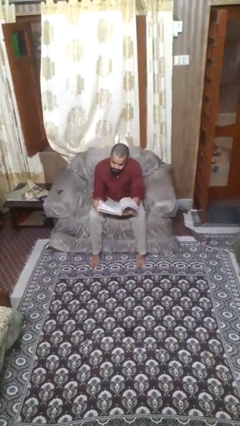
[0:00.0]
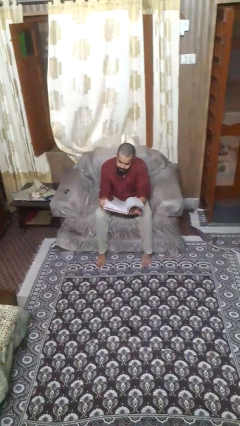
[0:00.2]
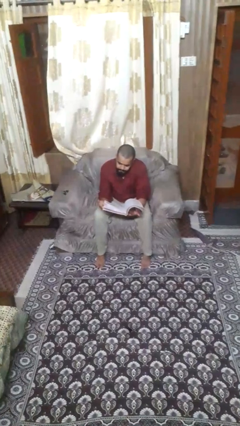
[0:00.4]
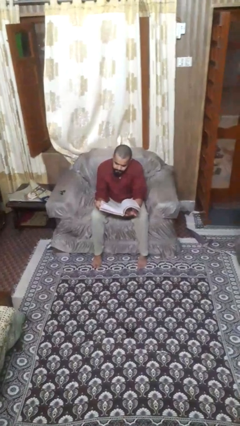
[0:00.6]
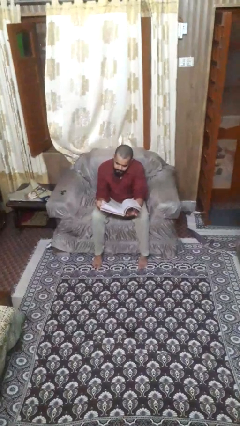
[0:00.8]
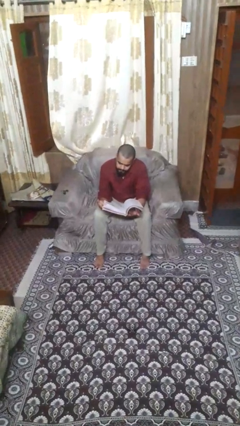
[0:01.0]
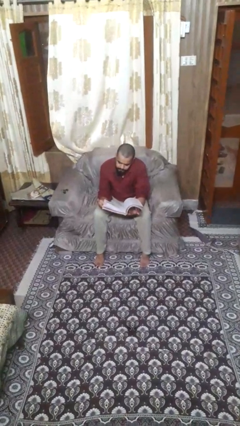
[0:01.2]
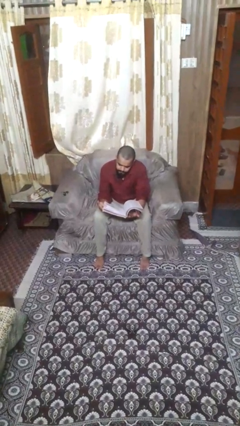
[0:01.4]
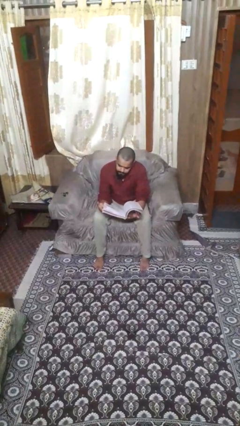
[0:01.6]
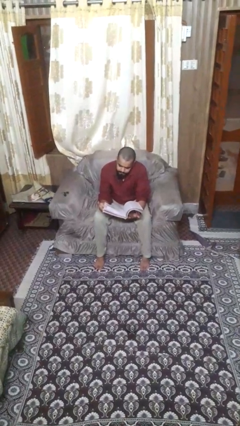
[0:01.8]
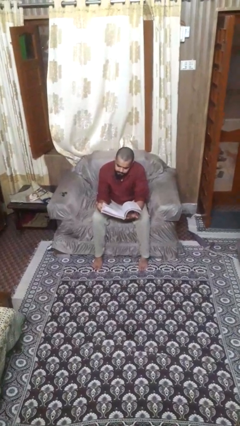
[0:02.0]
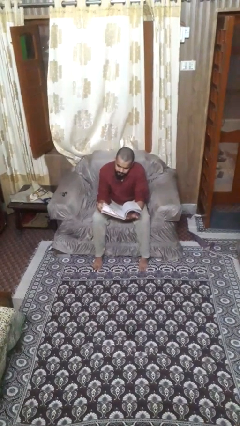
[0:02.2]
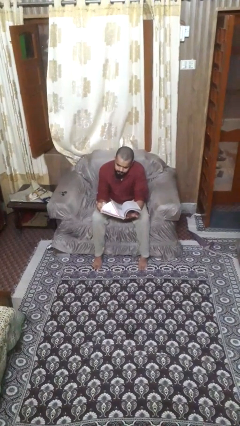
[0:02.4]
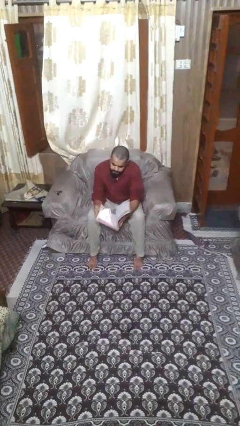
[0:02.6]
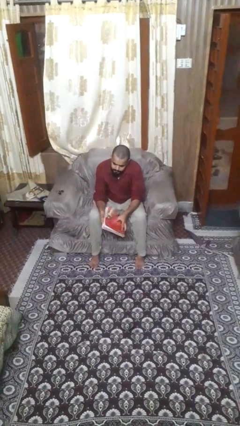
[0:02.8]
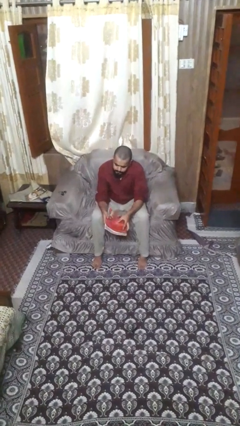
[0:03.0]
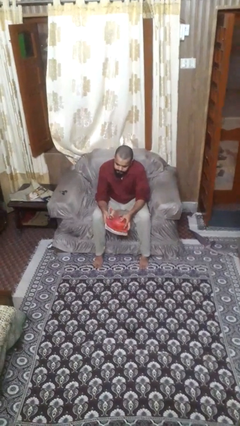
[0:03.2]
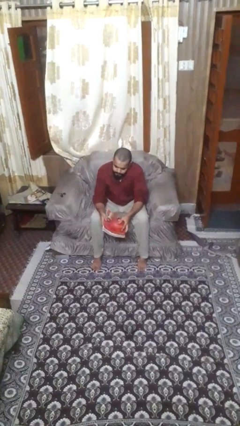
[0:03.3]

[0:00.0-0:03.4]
person reads book

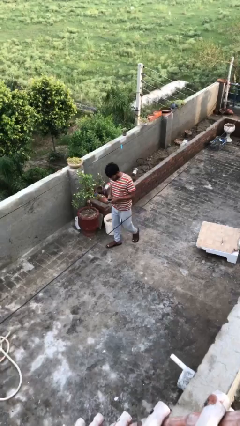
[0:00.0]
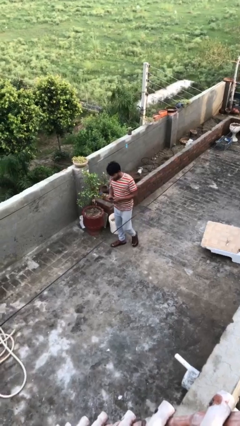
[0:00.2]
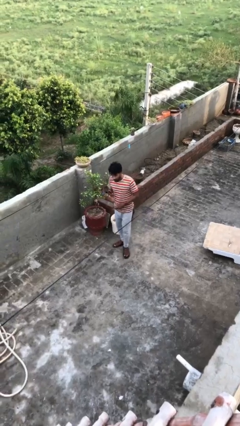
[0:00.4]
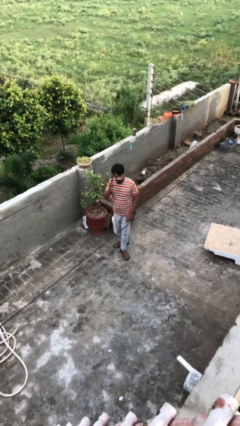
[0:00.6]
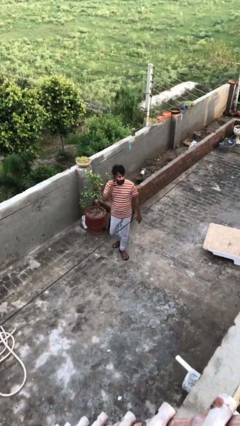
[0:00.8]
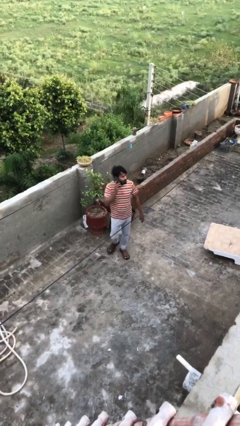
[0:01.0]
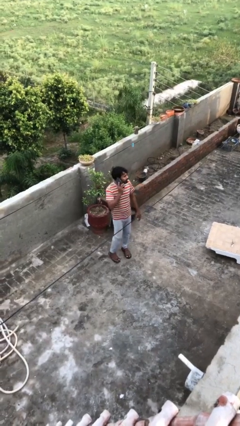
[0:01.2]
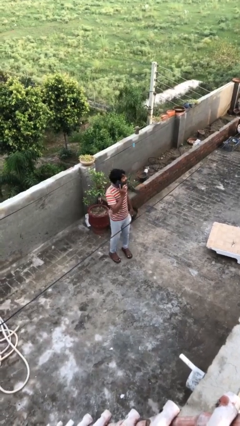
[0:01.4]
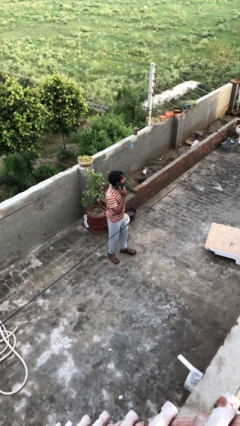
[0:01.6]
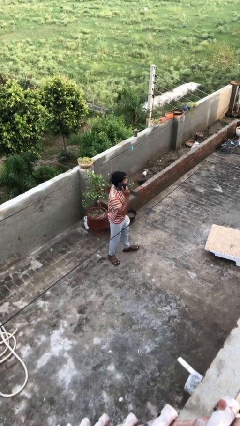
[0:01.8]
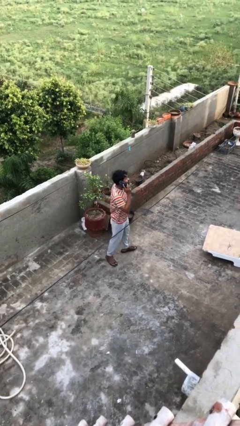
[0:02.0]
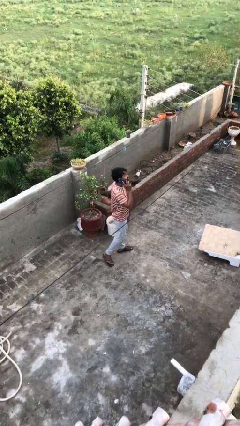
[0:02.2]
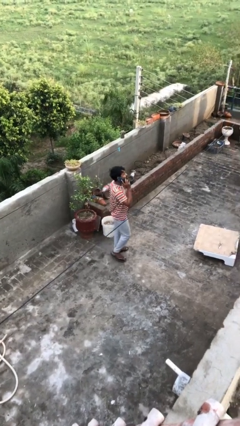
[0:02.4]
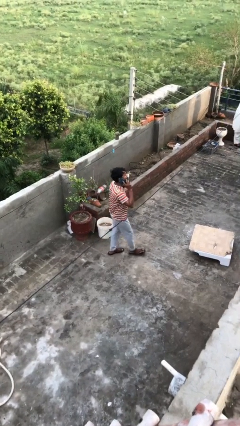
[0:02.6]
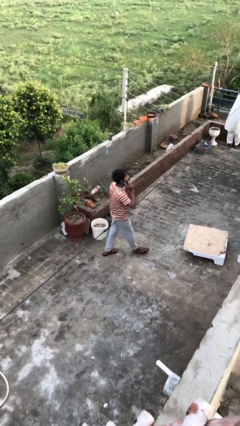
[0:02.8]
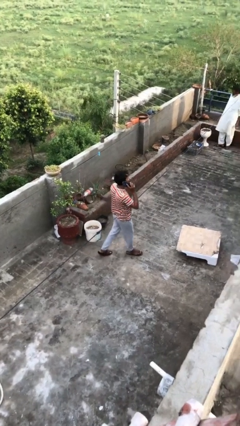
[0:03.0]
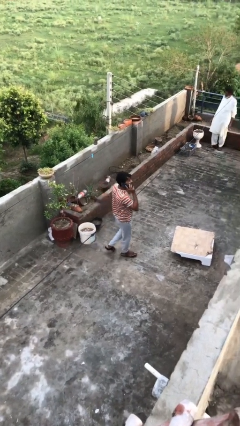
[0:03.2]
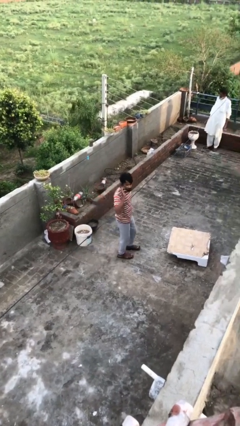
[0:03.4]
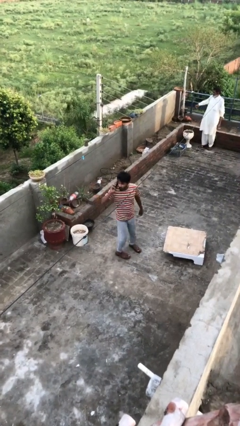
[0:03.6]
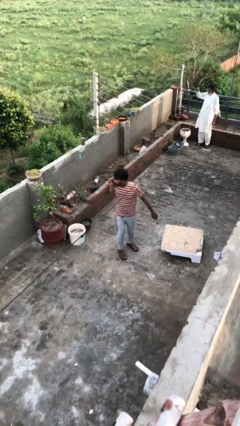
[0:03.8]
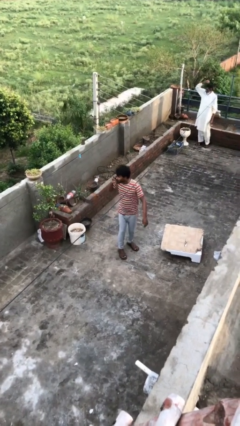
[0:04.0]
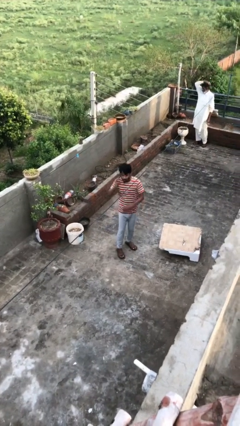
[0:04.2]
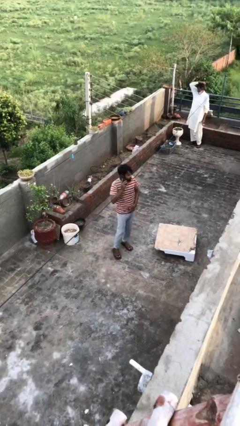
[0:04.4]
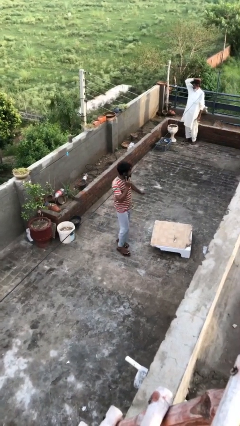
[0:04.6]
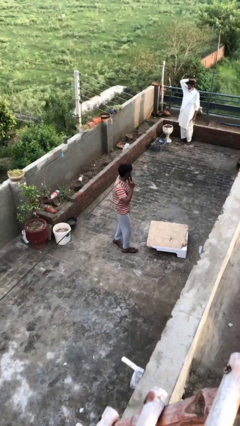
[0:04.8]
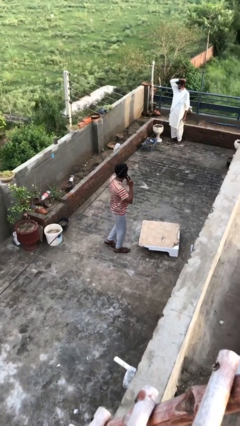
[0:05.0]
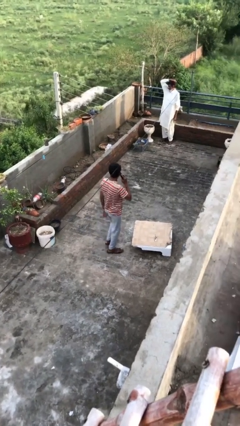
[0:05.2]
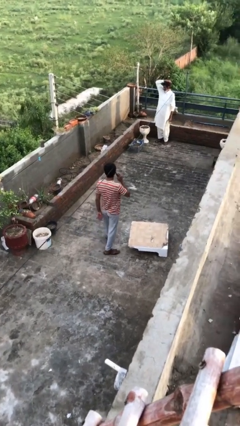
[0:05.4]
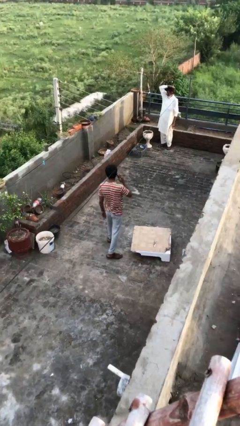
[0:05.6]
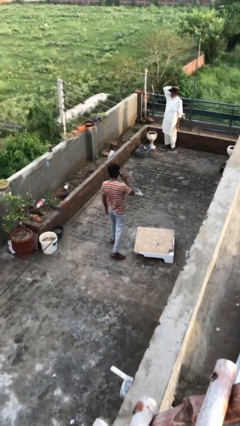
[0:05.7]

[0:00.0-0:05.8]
person talks on phone

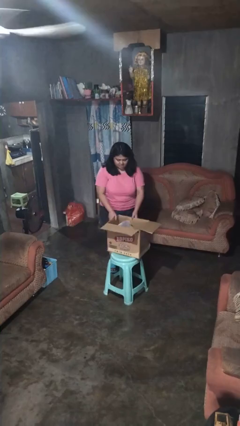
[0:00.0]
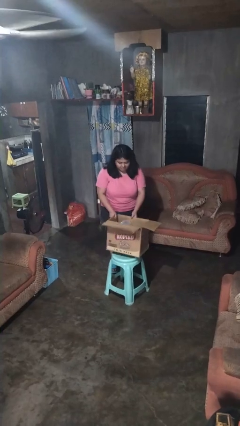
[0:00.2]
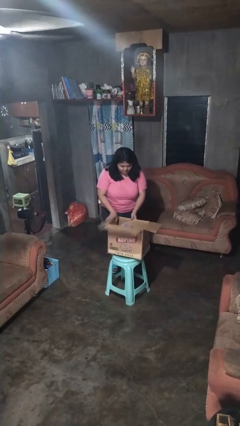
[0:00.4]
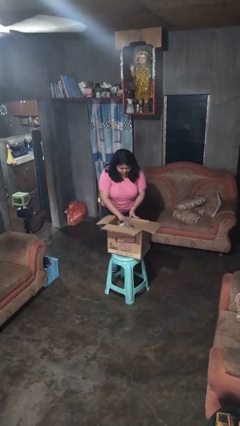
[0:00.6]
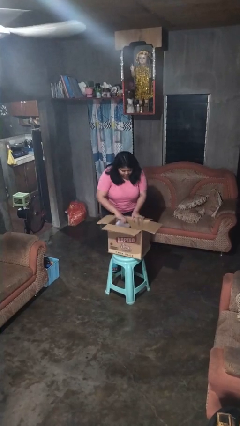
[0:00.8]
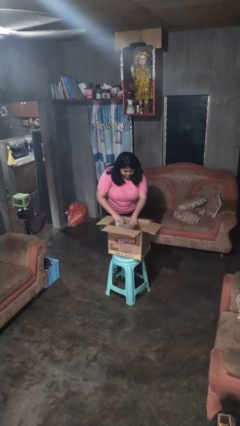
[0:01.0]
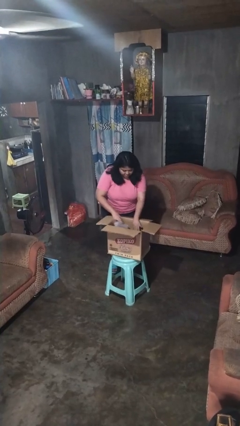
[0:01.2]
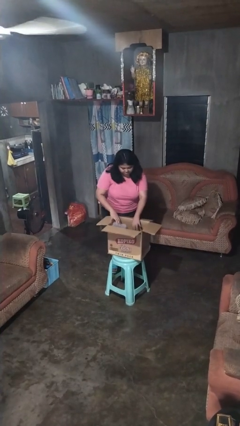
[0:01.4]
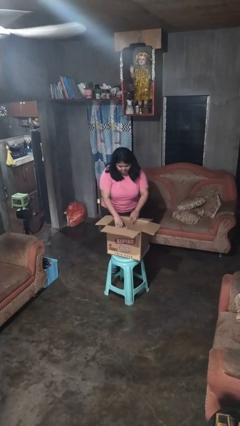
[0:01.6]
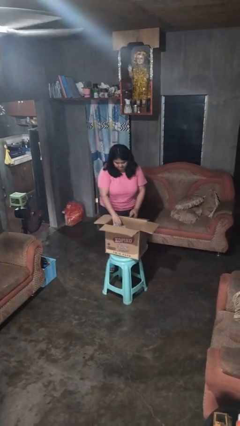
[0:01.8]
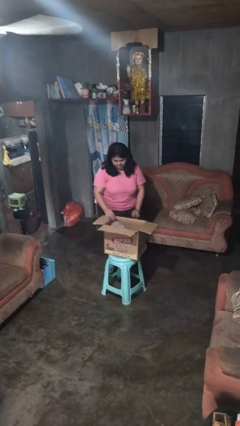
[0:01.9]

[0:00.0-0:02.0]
person searches in box

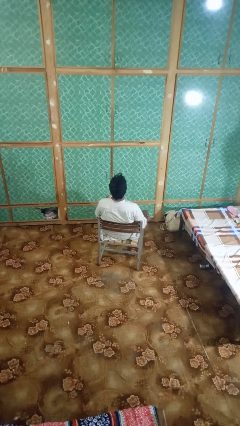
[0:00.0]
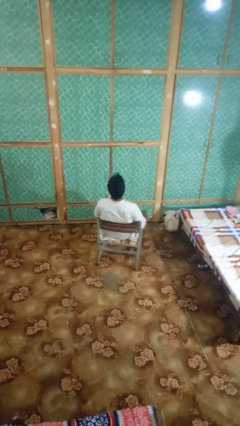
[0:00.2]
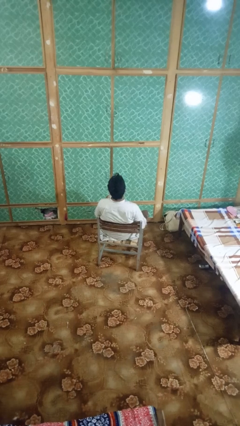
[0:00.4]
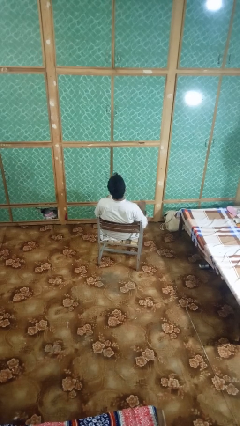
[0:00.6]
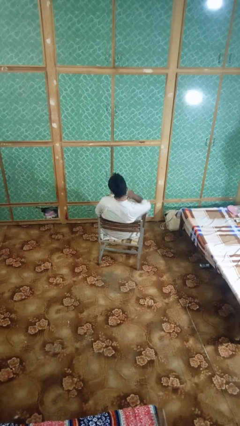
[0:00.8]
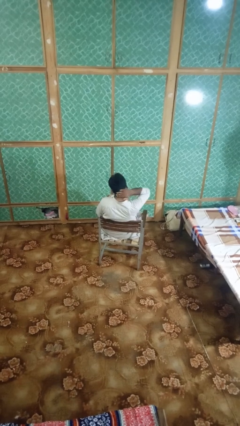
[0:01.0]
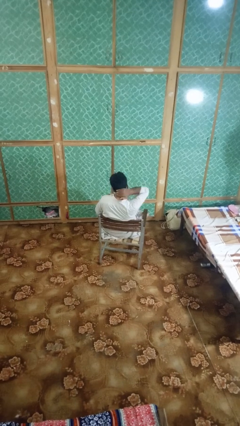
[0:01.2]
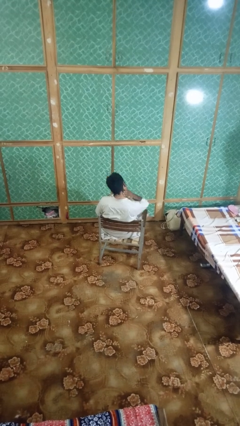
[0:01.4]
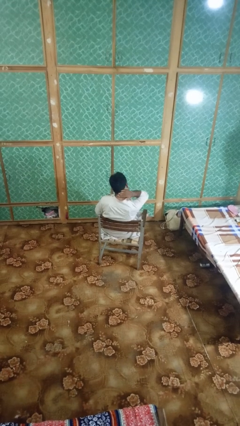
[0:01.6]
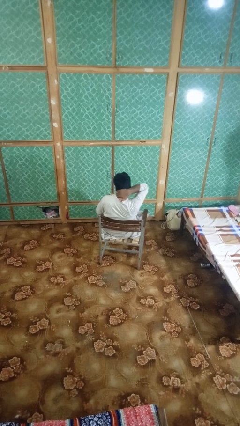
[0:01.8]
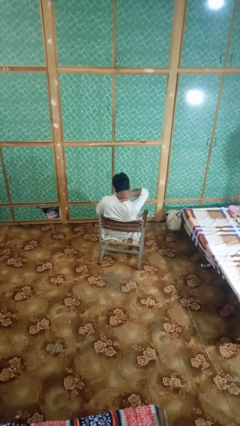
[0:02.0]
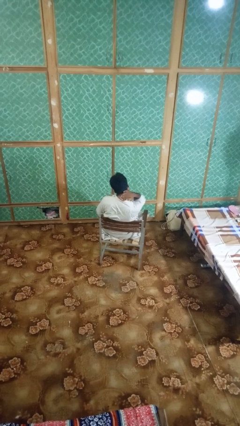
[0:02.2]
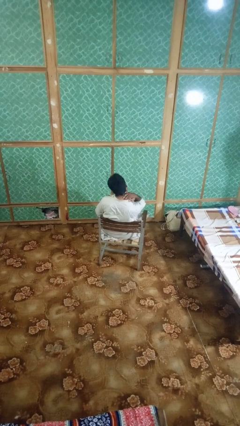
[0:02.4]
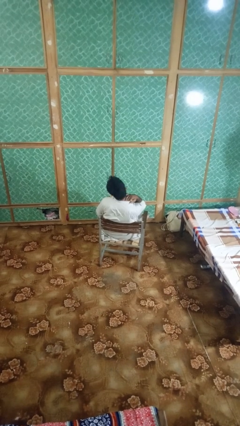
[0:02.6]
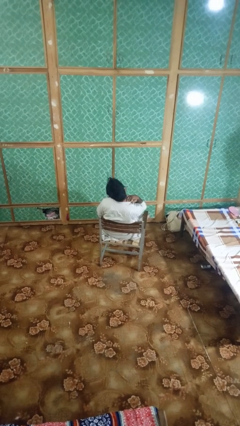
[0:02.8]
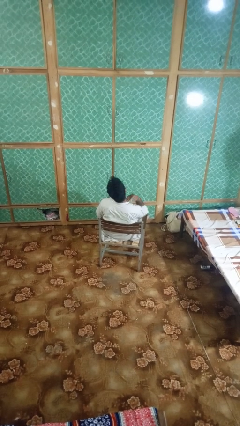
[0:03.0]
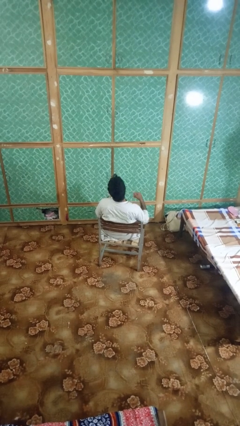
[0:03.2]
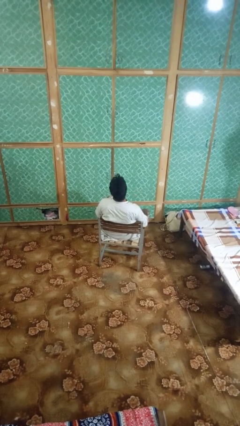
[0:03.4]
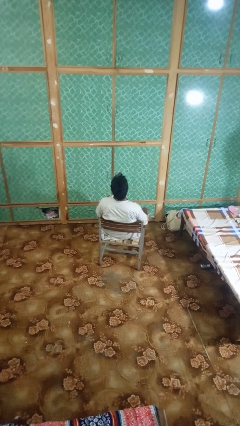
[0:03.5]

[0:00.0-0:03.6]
person rubs neck

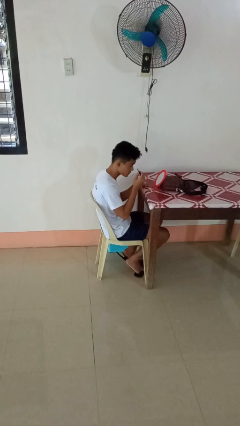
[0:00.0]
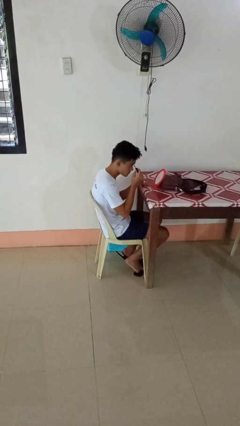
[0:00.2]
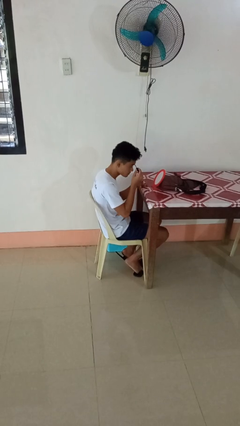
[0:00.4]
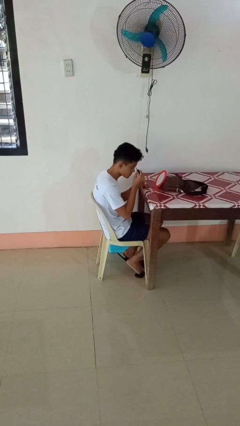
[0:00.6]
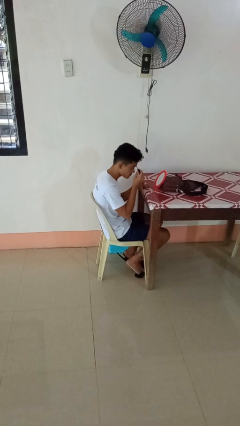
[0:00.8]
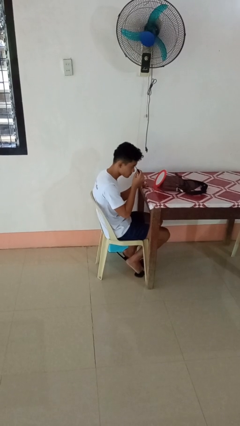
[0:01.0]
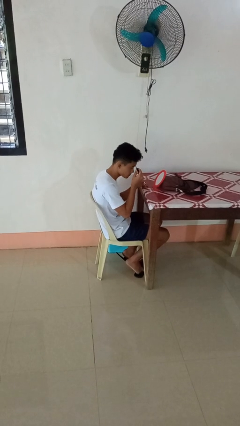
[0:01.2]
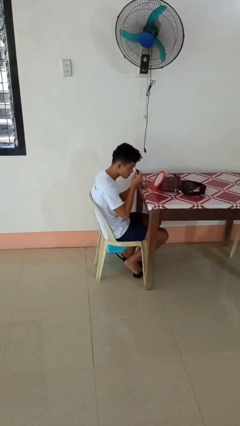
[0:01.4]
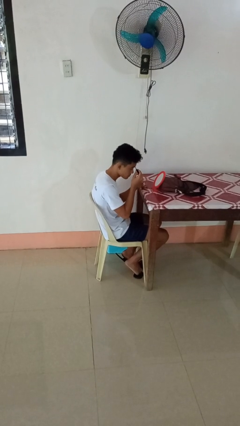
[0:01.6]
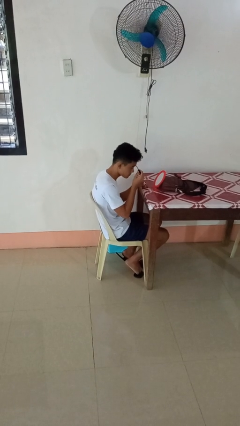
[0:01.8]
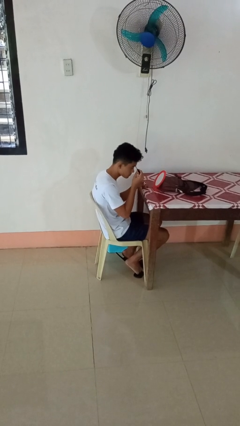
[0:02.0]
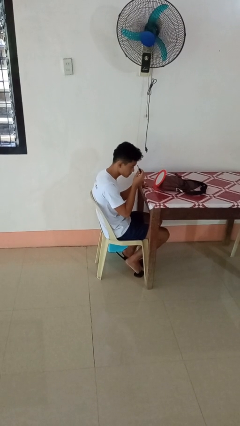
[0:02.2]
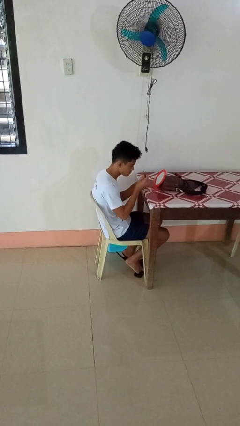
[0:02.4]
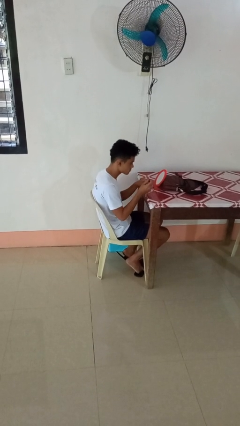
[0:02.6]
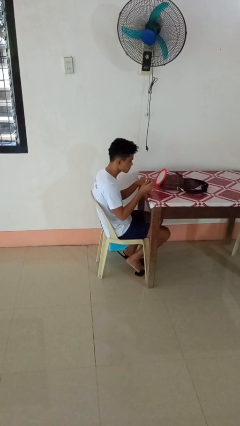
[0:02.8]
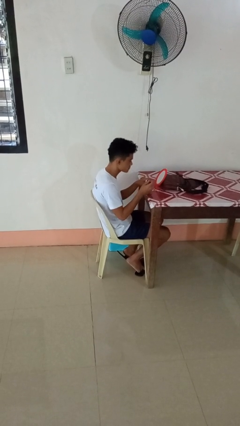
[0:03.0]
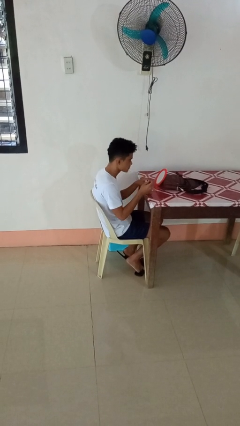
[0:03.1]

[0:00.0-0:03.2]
person applies eye makeup
